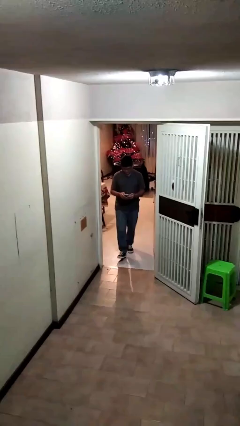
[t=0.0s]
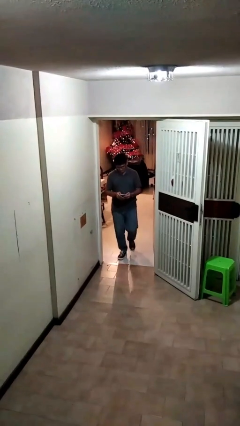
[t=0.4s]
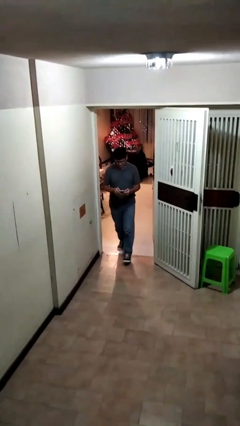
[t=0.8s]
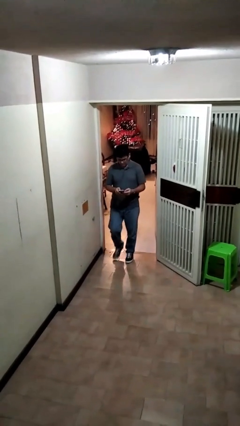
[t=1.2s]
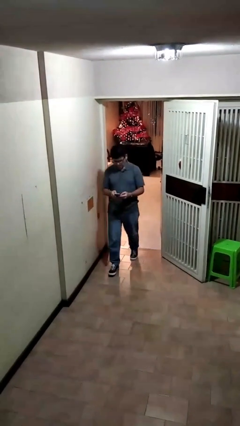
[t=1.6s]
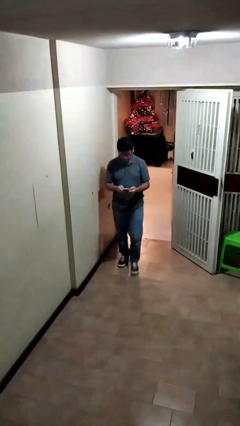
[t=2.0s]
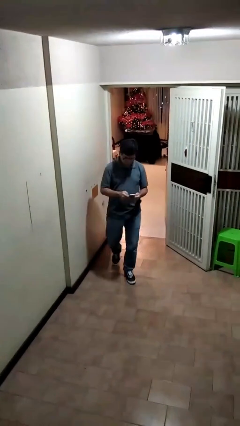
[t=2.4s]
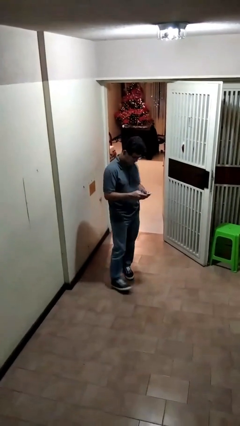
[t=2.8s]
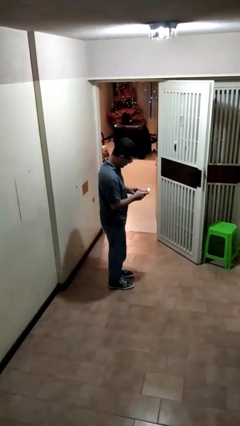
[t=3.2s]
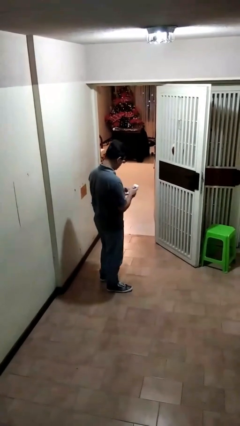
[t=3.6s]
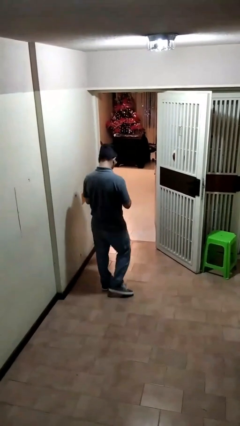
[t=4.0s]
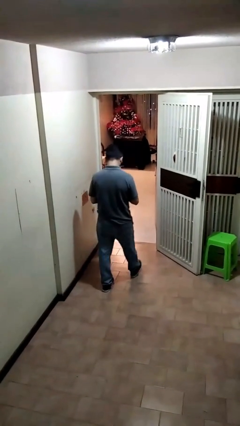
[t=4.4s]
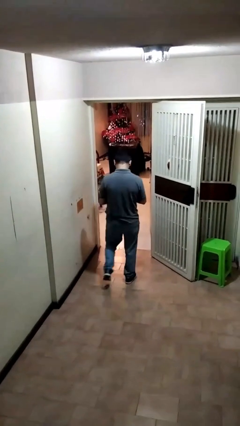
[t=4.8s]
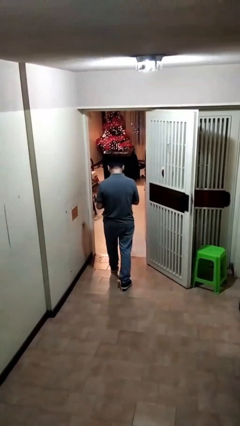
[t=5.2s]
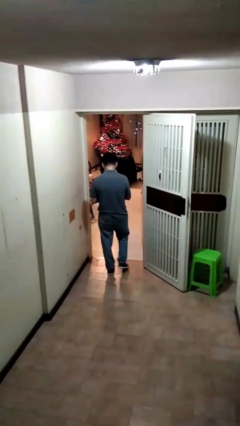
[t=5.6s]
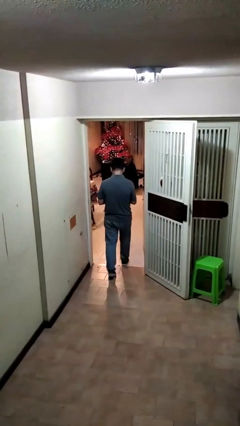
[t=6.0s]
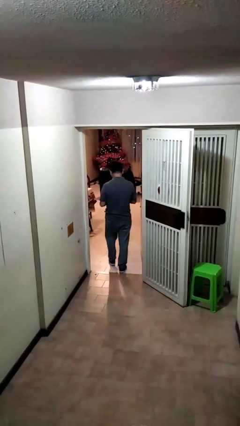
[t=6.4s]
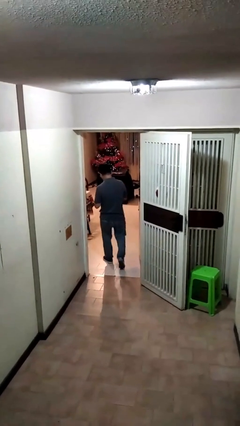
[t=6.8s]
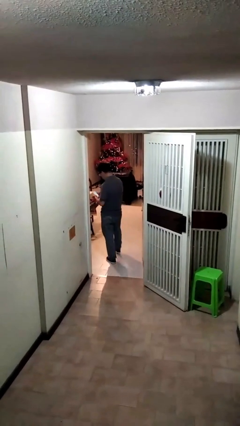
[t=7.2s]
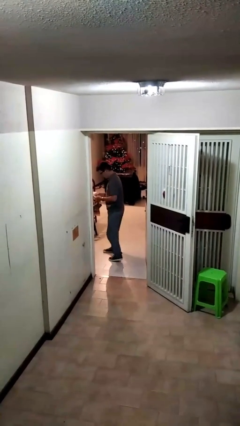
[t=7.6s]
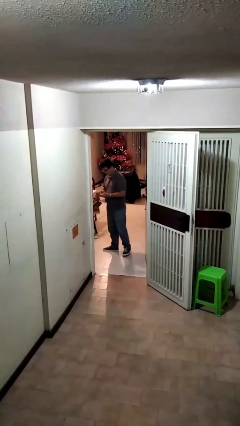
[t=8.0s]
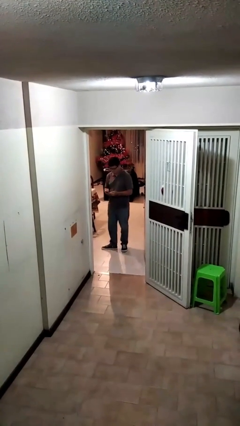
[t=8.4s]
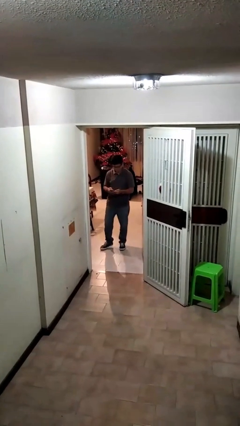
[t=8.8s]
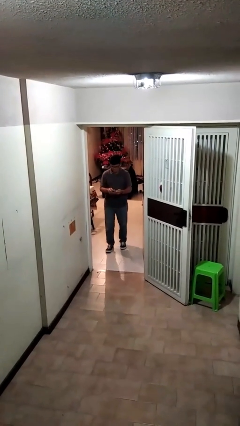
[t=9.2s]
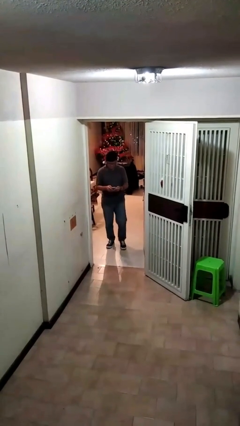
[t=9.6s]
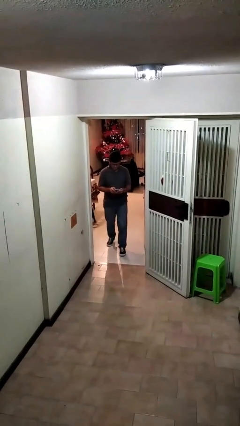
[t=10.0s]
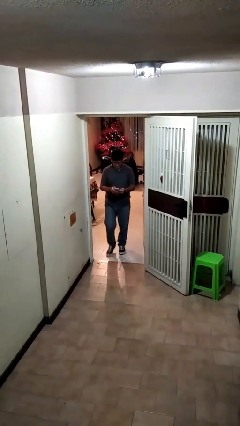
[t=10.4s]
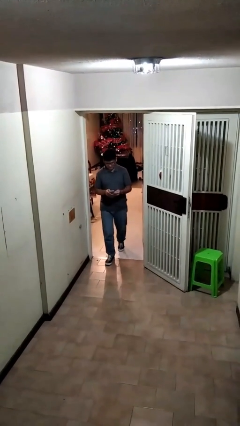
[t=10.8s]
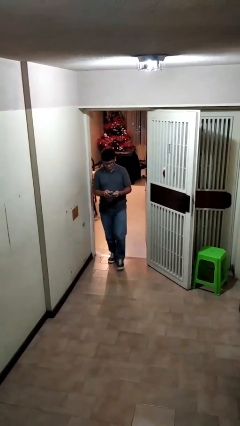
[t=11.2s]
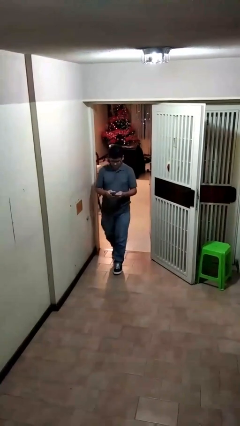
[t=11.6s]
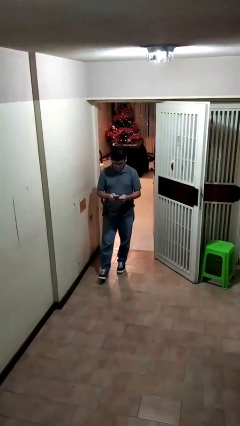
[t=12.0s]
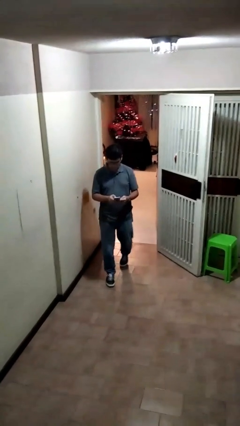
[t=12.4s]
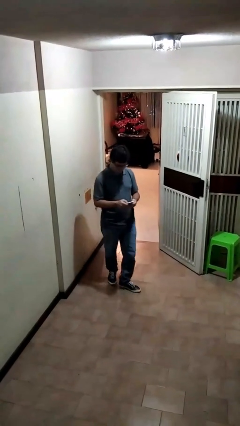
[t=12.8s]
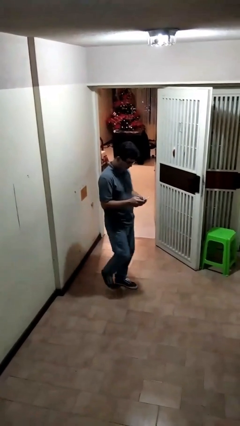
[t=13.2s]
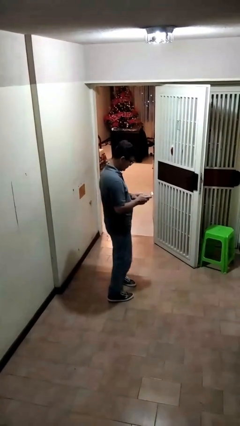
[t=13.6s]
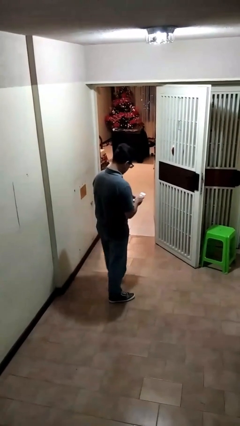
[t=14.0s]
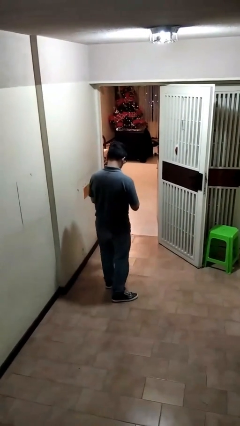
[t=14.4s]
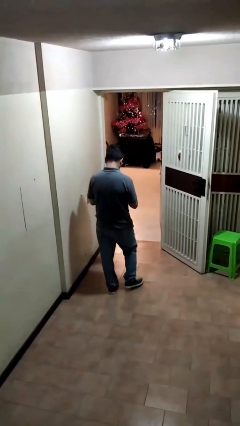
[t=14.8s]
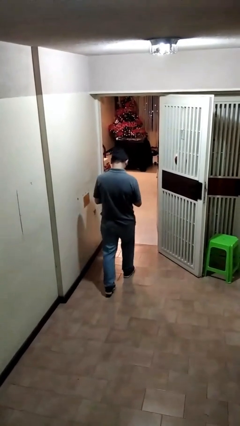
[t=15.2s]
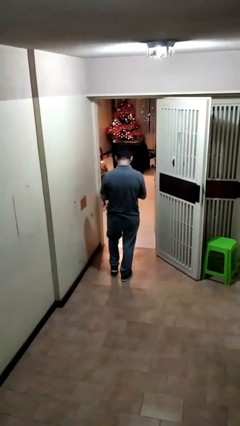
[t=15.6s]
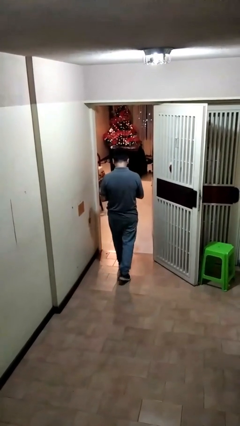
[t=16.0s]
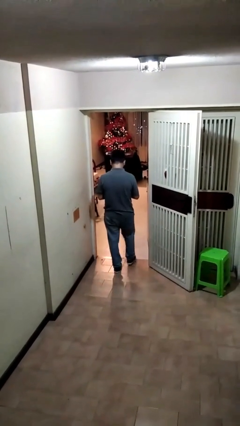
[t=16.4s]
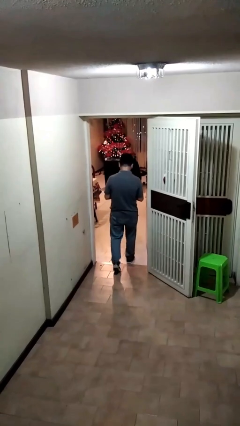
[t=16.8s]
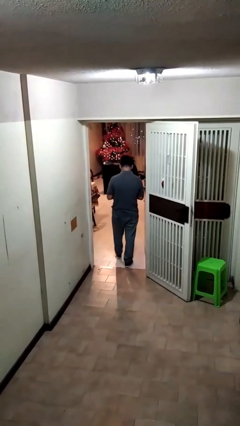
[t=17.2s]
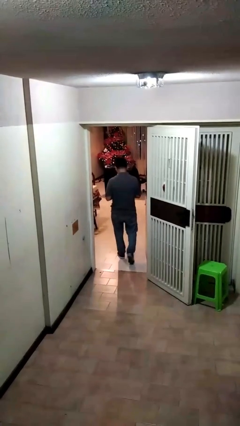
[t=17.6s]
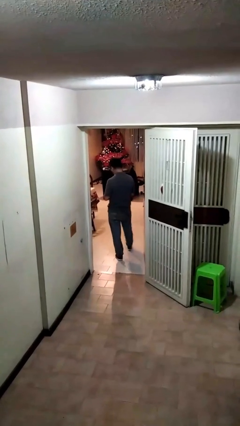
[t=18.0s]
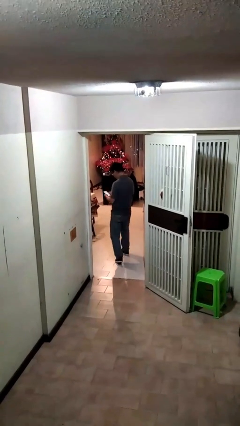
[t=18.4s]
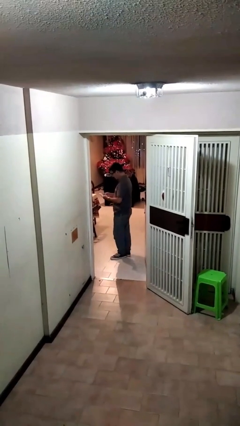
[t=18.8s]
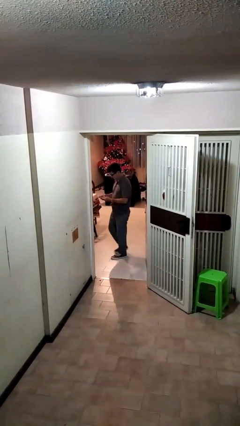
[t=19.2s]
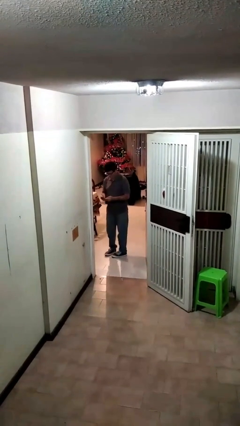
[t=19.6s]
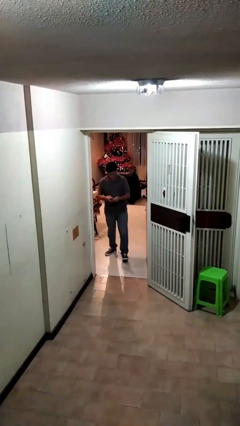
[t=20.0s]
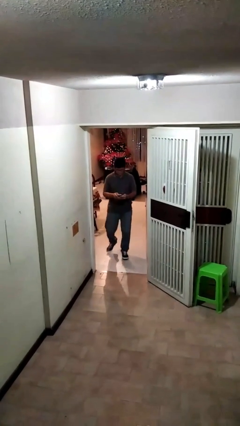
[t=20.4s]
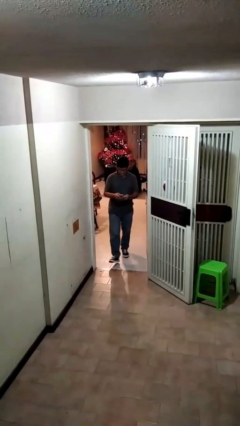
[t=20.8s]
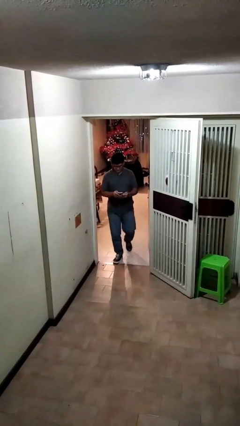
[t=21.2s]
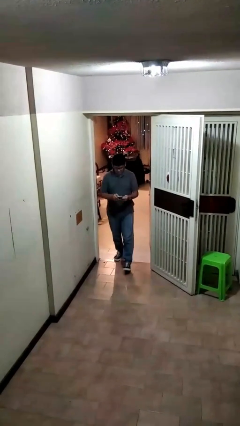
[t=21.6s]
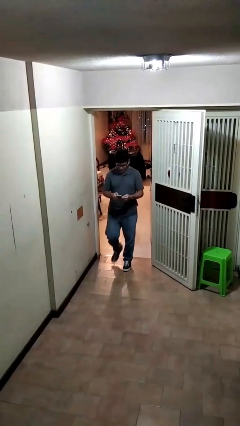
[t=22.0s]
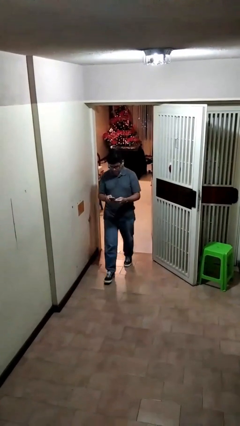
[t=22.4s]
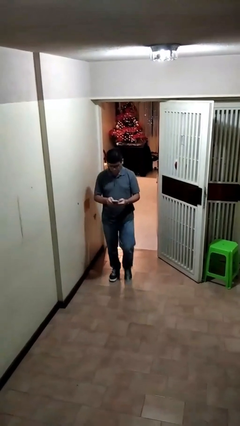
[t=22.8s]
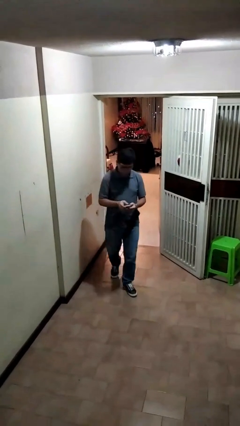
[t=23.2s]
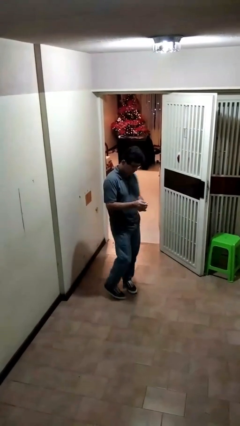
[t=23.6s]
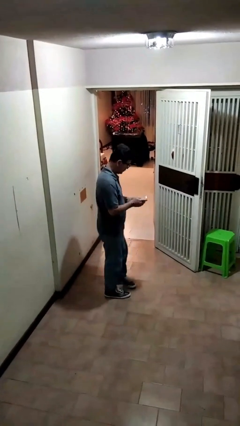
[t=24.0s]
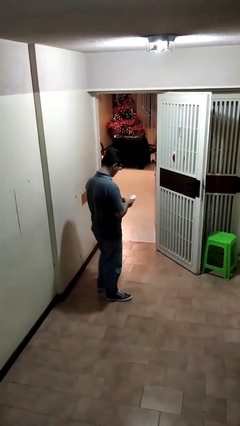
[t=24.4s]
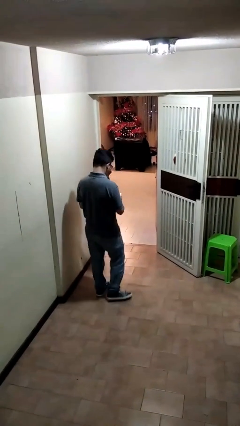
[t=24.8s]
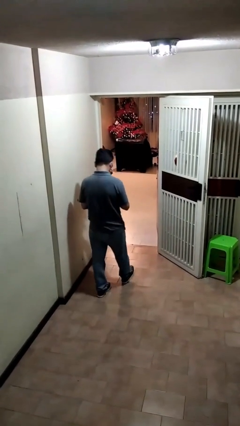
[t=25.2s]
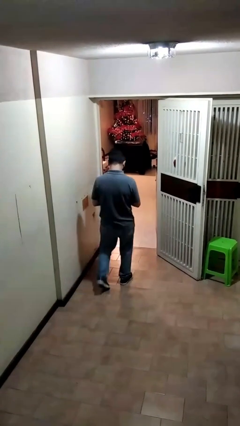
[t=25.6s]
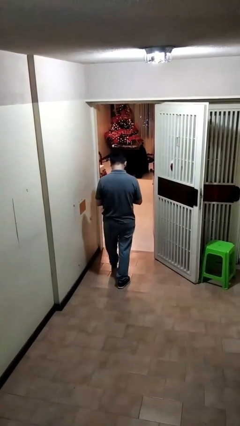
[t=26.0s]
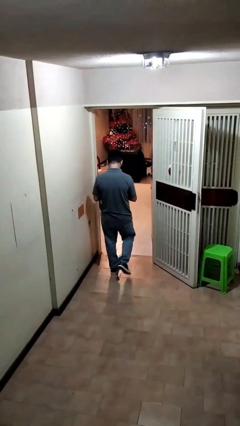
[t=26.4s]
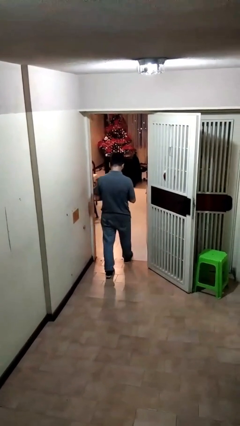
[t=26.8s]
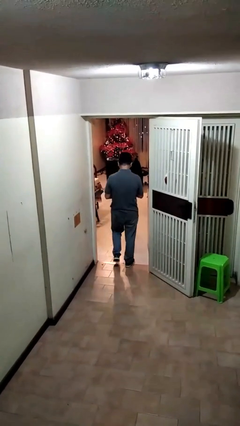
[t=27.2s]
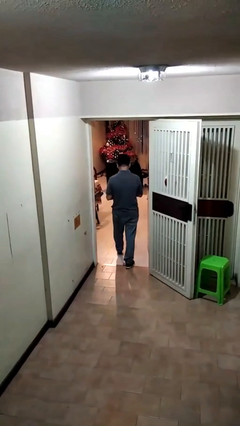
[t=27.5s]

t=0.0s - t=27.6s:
person texts on phone

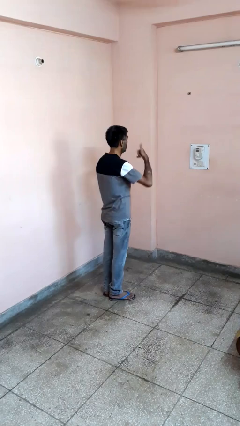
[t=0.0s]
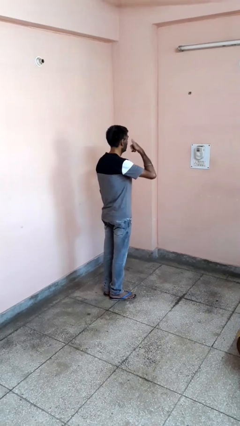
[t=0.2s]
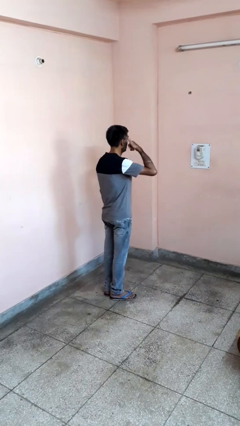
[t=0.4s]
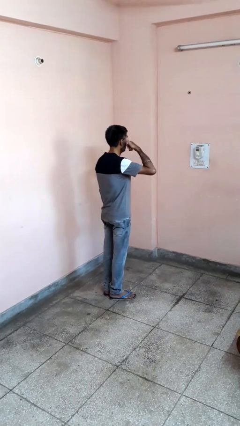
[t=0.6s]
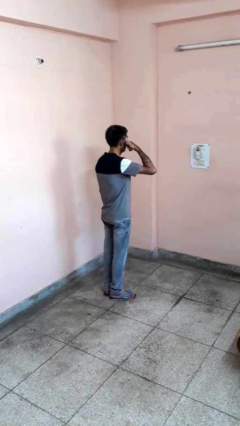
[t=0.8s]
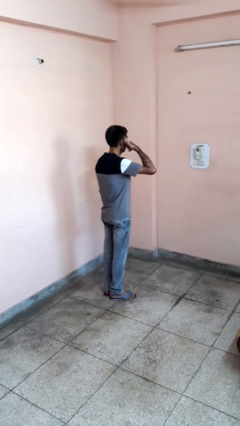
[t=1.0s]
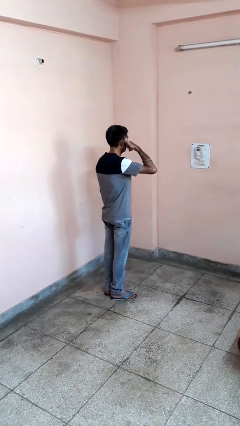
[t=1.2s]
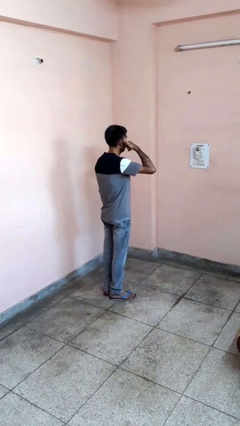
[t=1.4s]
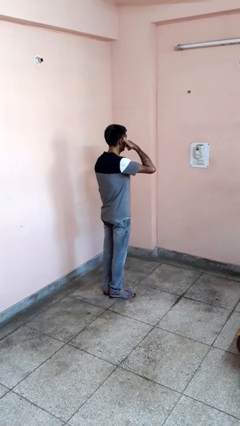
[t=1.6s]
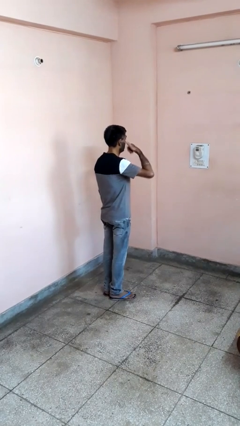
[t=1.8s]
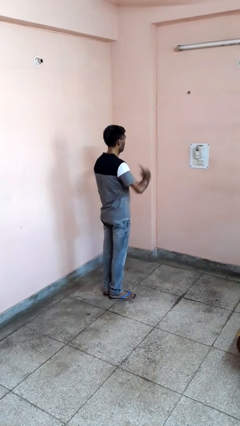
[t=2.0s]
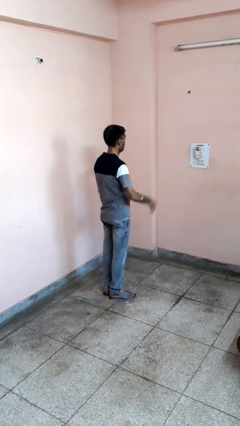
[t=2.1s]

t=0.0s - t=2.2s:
person gestures call me

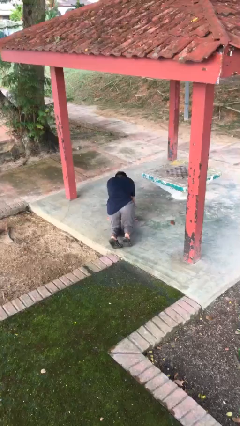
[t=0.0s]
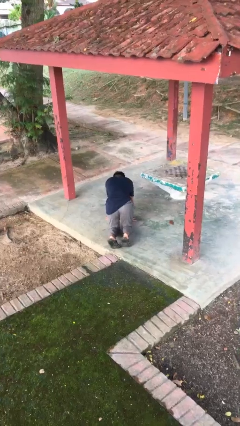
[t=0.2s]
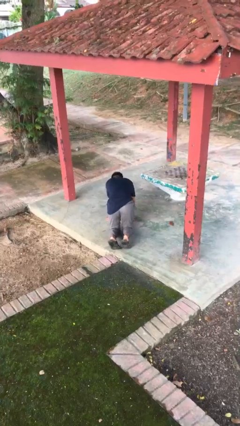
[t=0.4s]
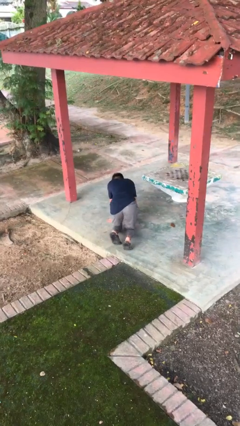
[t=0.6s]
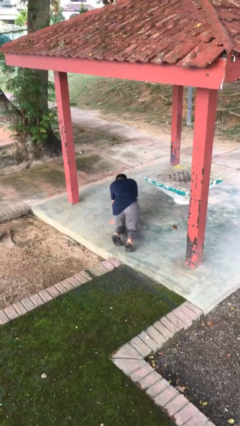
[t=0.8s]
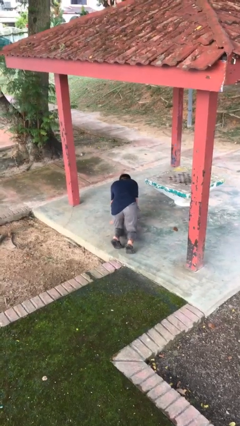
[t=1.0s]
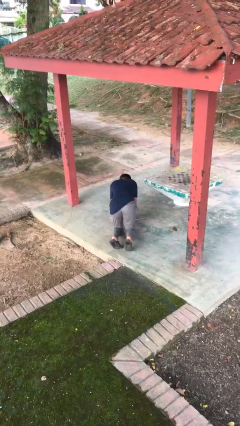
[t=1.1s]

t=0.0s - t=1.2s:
person crawls

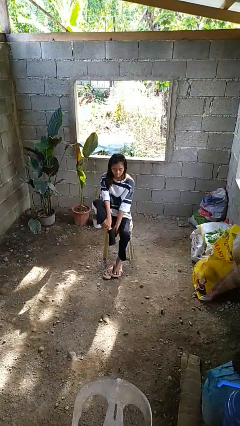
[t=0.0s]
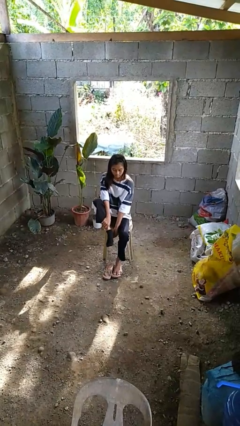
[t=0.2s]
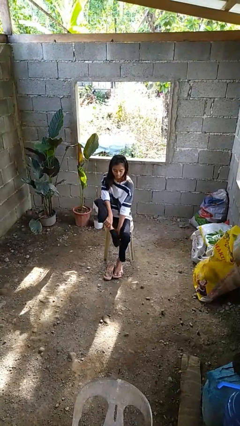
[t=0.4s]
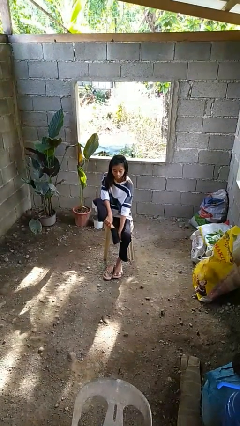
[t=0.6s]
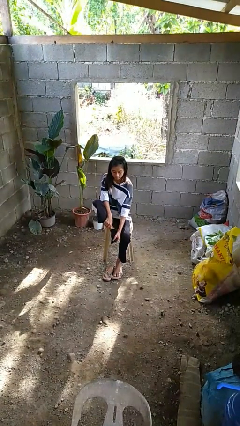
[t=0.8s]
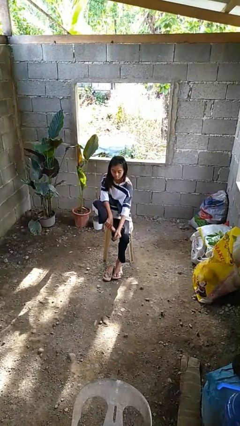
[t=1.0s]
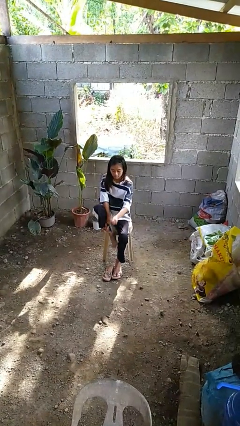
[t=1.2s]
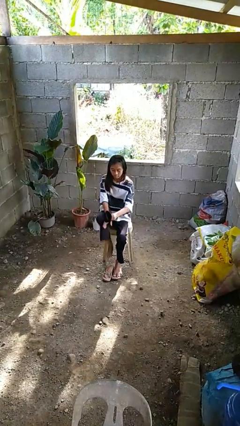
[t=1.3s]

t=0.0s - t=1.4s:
person takes off socks
